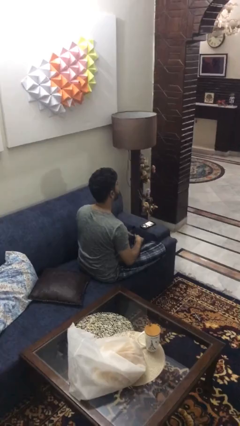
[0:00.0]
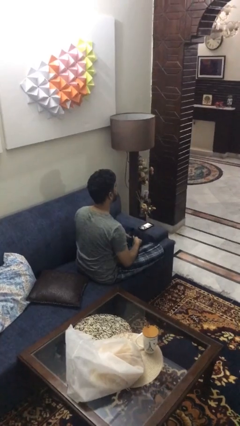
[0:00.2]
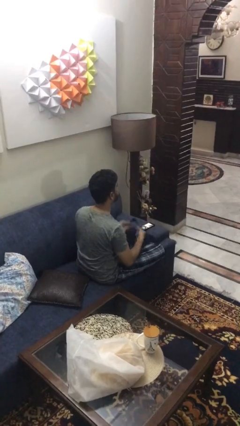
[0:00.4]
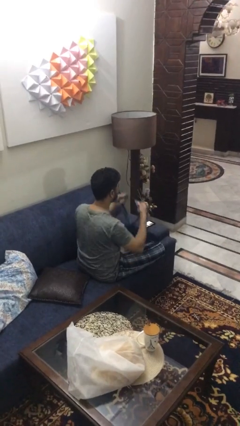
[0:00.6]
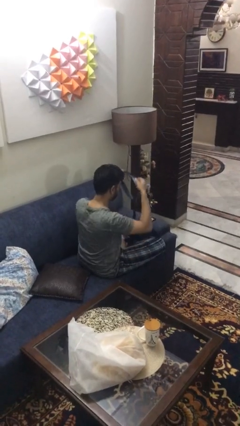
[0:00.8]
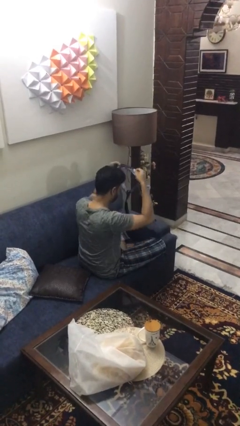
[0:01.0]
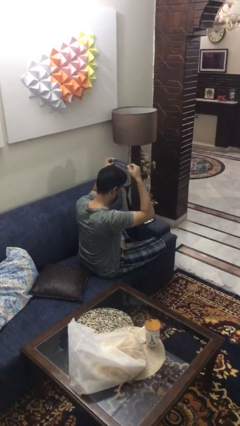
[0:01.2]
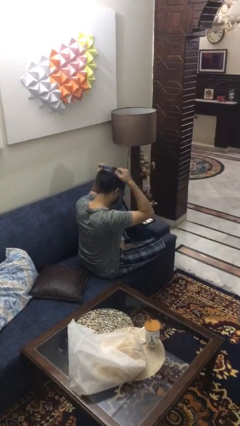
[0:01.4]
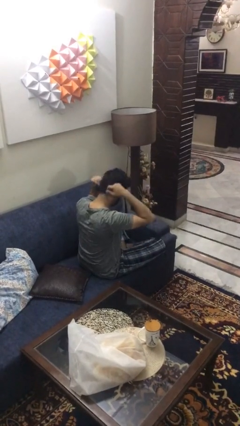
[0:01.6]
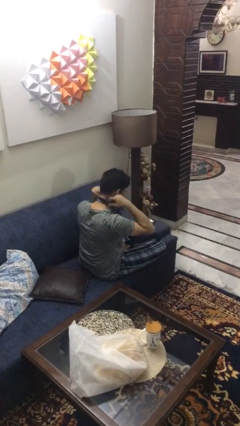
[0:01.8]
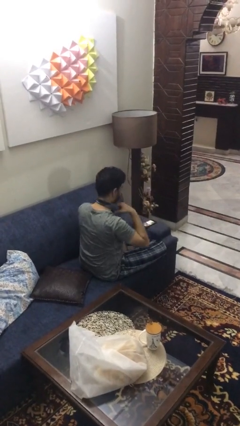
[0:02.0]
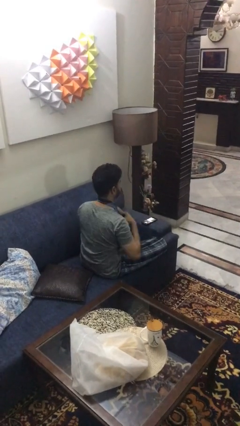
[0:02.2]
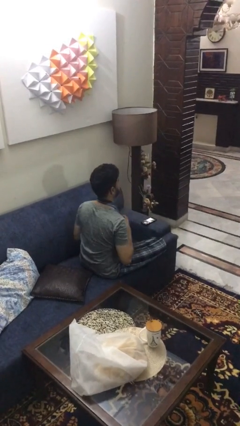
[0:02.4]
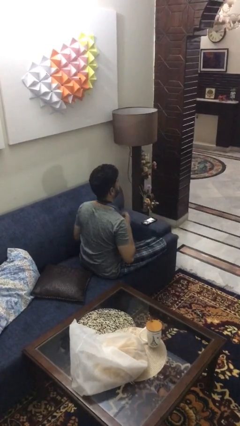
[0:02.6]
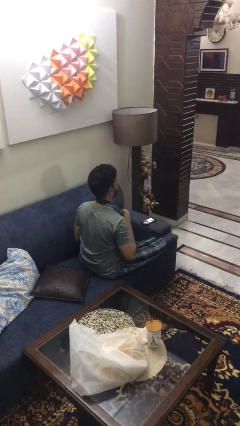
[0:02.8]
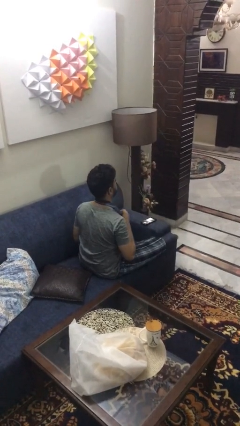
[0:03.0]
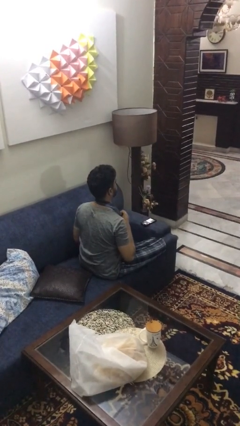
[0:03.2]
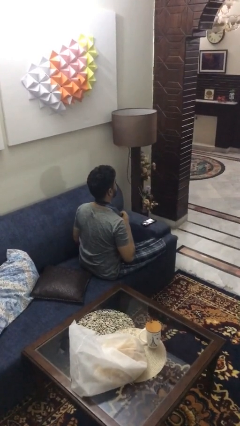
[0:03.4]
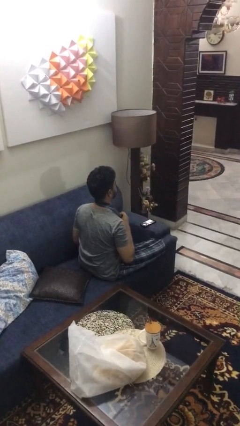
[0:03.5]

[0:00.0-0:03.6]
person puts on necktie

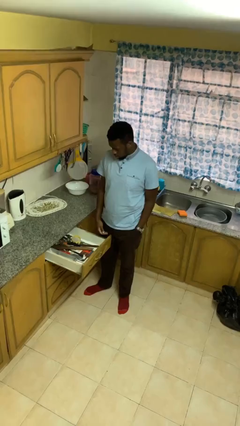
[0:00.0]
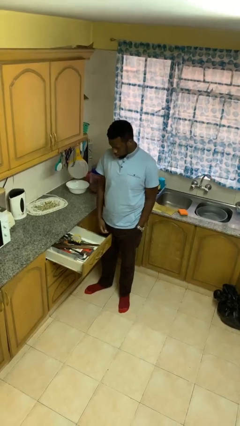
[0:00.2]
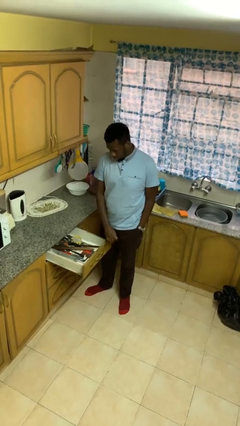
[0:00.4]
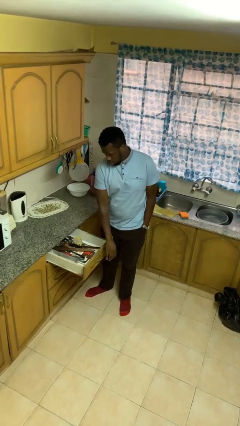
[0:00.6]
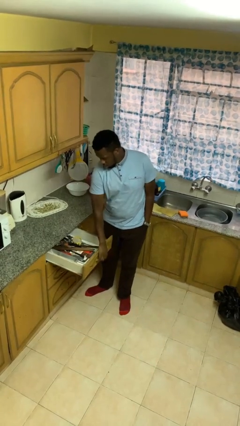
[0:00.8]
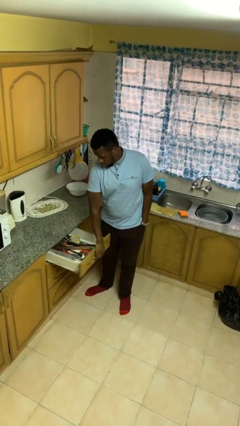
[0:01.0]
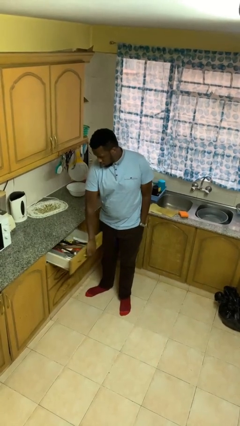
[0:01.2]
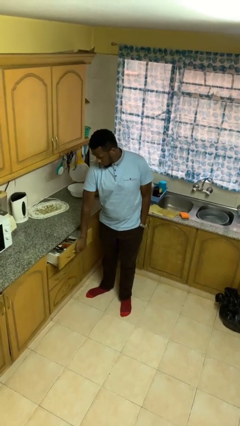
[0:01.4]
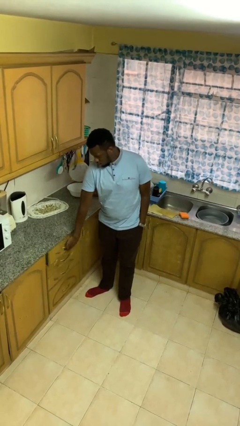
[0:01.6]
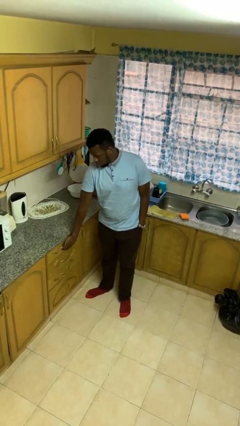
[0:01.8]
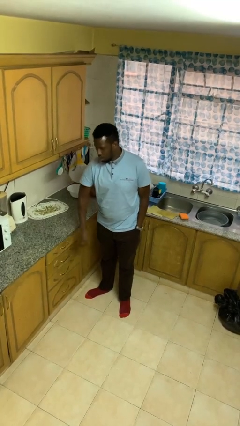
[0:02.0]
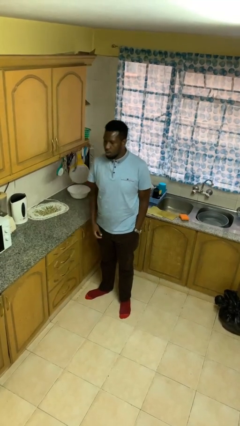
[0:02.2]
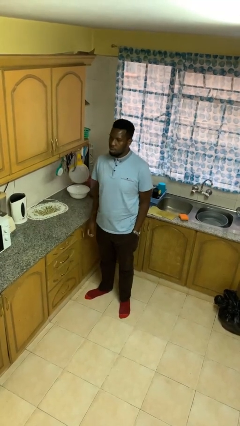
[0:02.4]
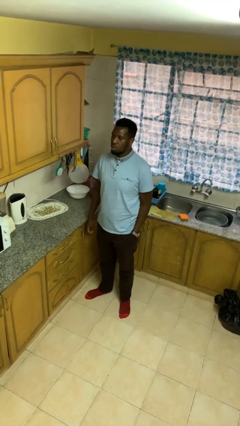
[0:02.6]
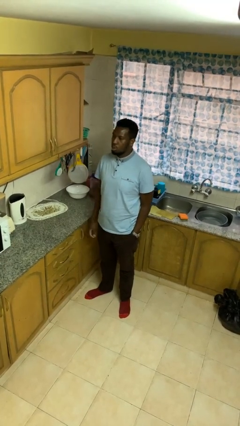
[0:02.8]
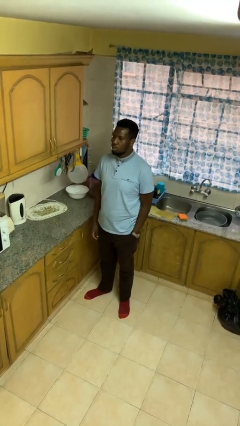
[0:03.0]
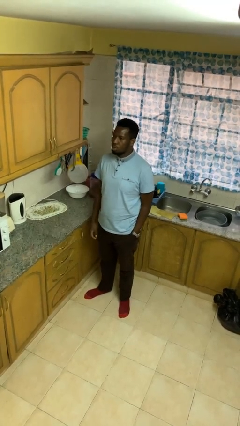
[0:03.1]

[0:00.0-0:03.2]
person closes kitchen drawer

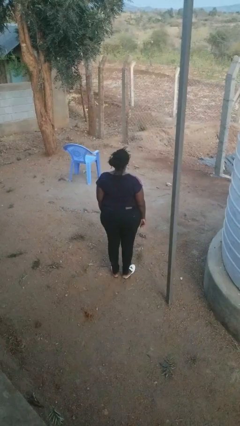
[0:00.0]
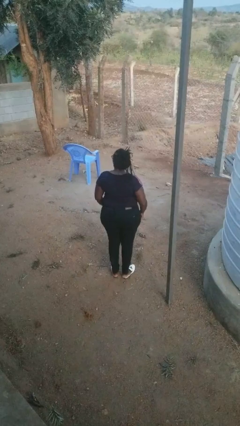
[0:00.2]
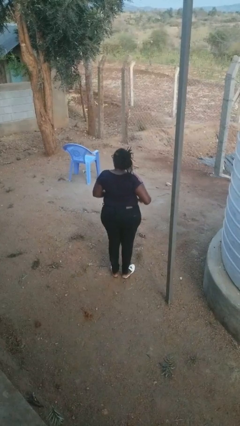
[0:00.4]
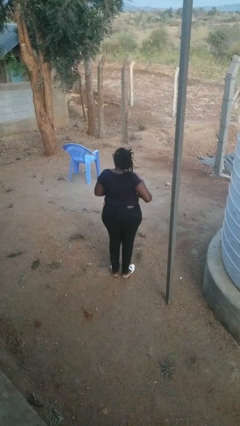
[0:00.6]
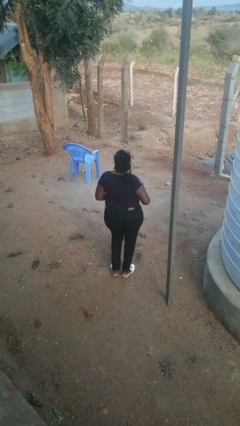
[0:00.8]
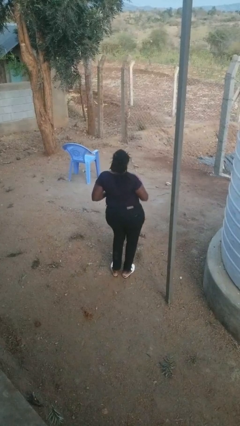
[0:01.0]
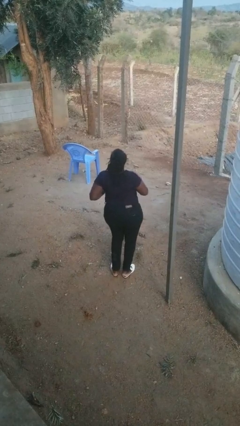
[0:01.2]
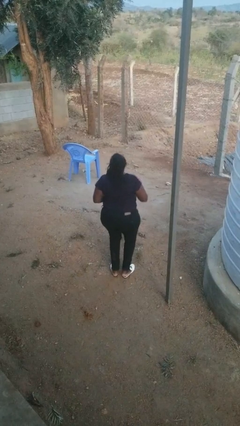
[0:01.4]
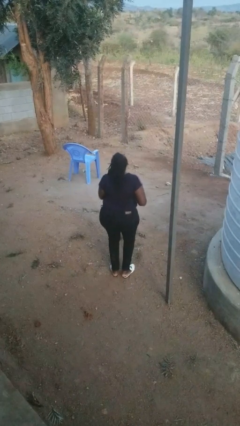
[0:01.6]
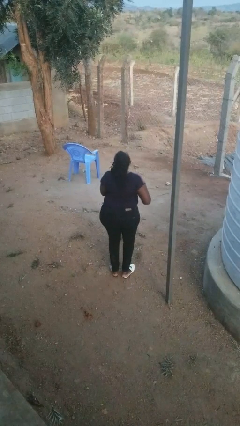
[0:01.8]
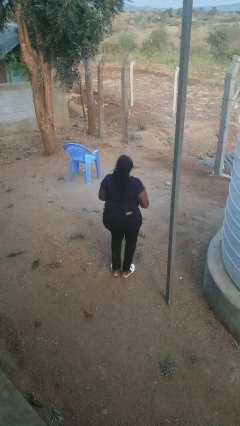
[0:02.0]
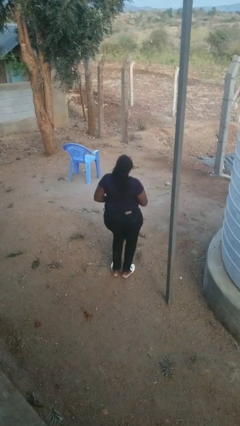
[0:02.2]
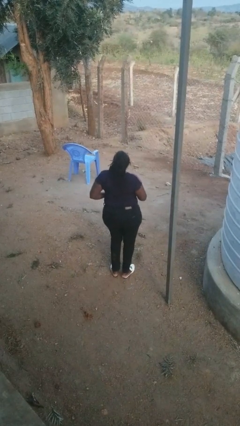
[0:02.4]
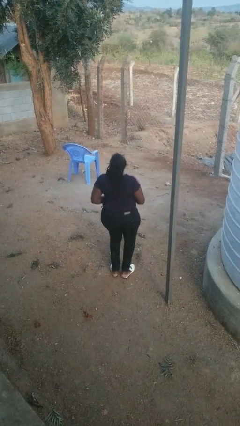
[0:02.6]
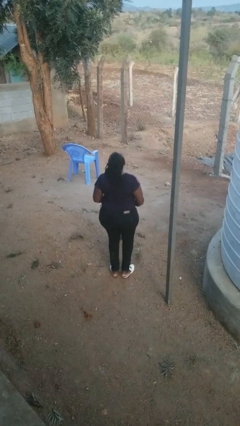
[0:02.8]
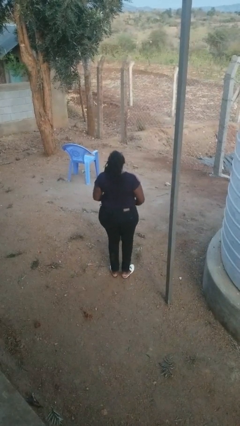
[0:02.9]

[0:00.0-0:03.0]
person dances in place

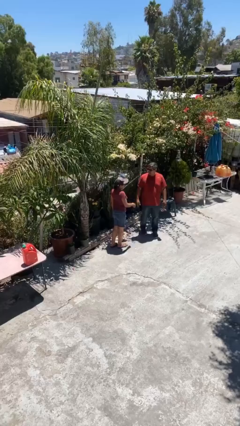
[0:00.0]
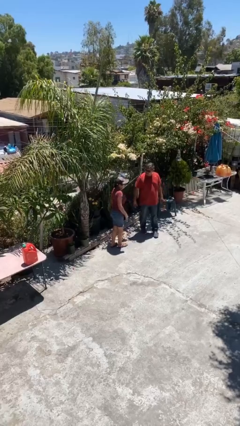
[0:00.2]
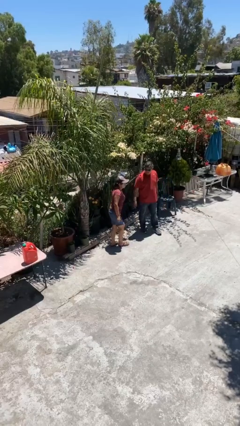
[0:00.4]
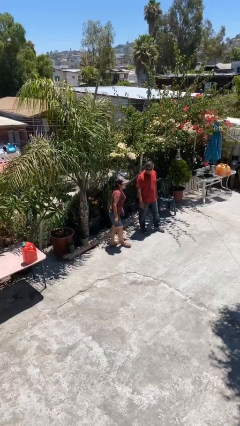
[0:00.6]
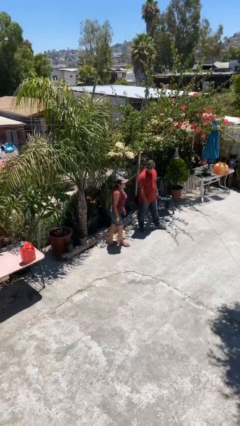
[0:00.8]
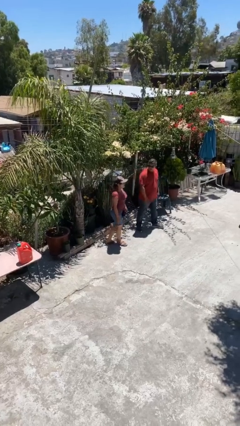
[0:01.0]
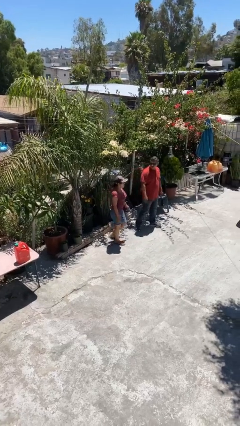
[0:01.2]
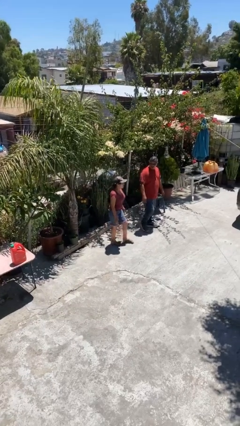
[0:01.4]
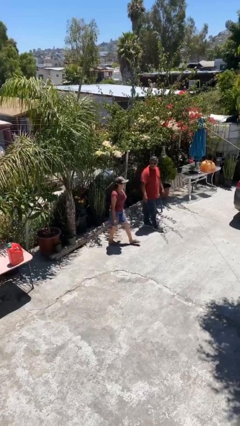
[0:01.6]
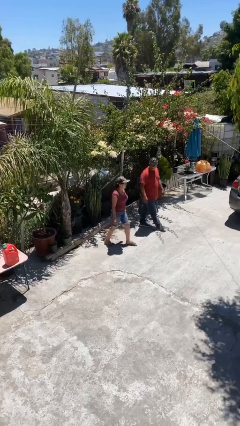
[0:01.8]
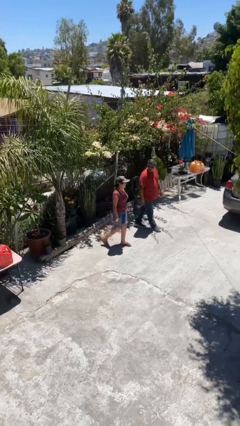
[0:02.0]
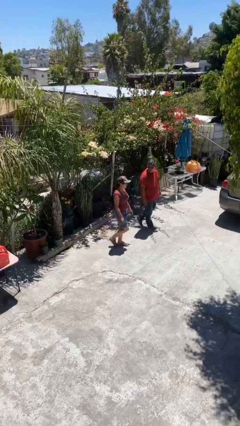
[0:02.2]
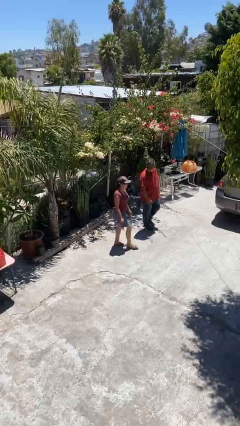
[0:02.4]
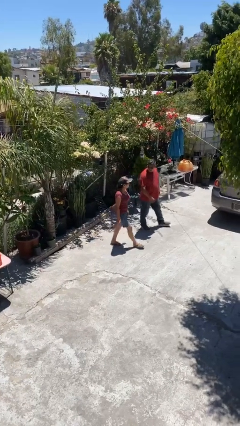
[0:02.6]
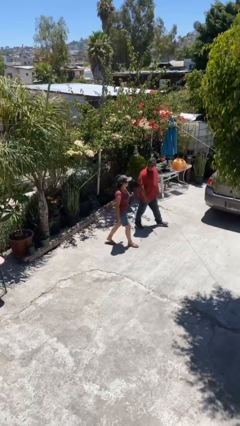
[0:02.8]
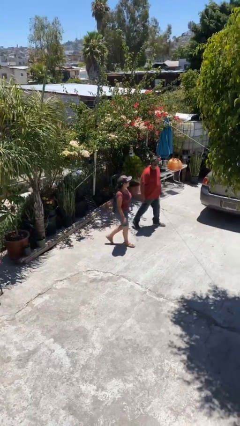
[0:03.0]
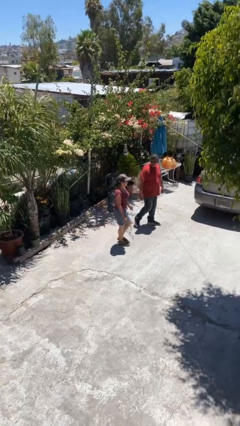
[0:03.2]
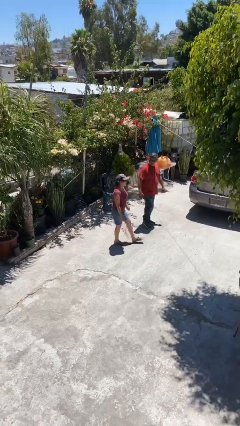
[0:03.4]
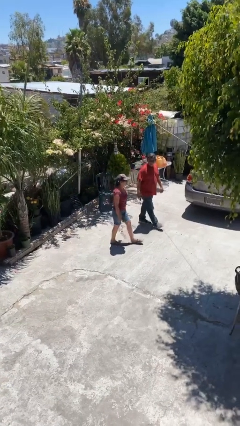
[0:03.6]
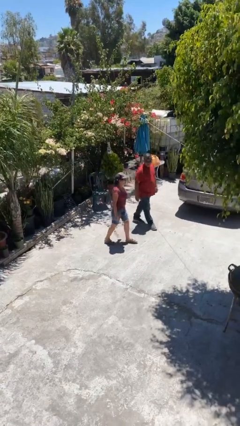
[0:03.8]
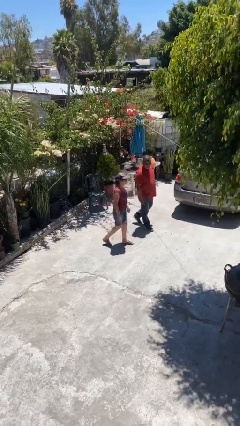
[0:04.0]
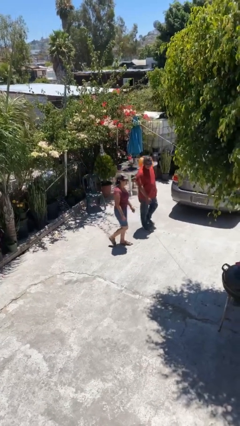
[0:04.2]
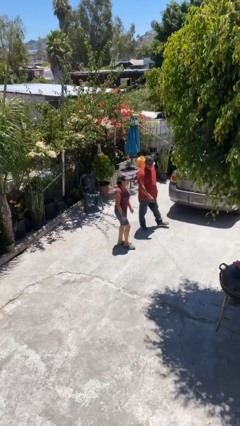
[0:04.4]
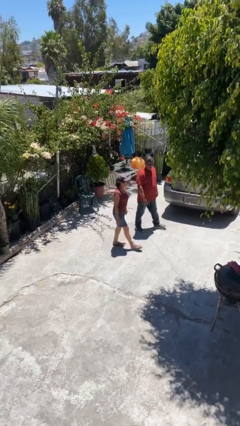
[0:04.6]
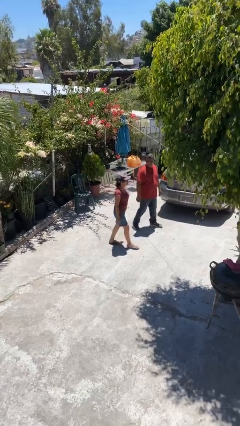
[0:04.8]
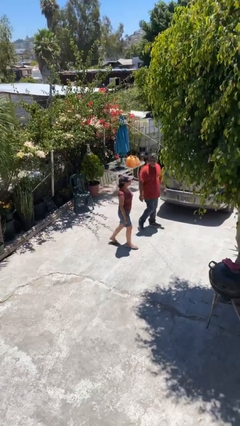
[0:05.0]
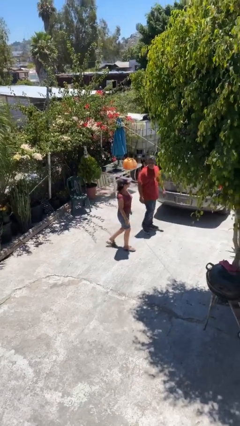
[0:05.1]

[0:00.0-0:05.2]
person talks to person

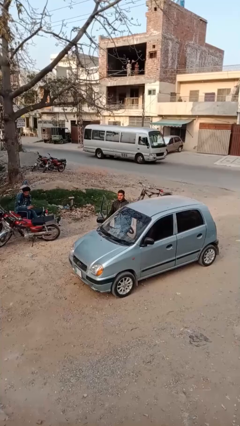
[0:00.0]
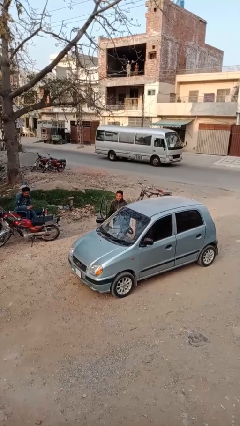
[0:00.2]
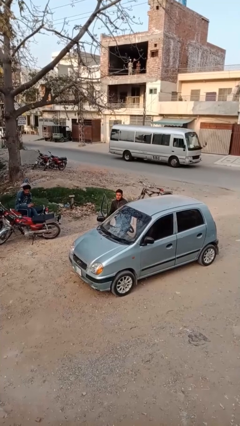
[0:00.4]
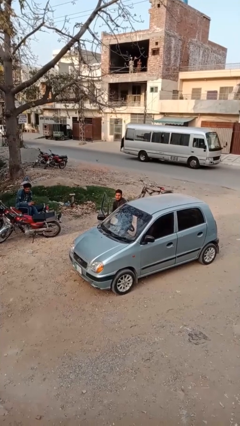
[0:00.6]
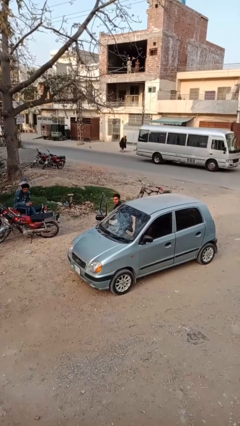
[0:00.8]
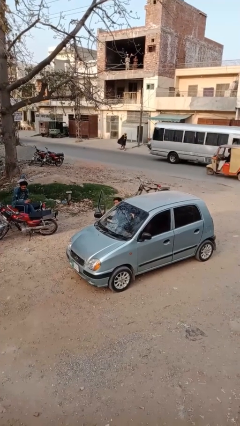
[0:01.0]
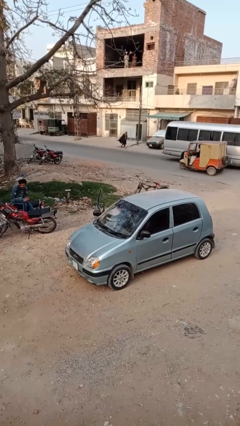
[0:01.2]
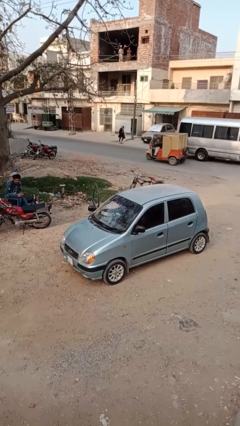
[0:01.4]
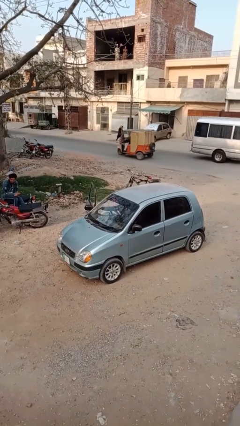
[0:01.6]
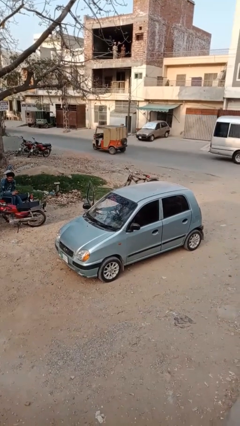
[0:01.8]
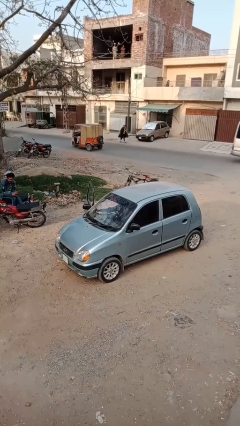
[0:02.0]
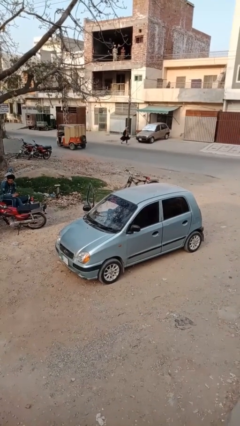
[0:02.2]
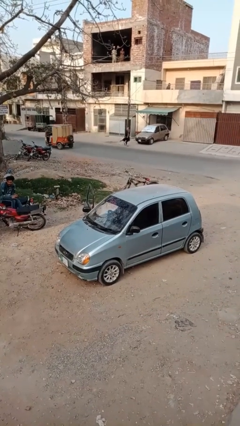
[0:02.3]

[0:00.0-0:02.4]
person enters car
